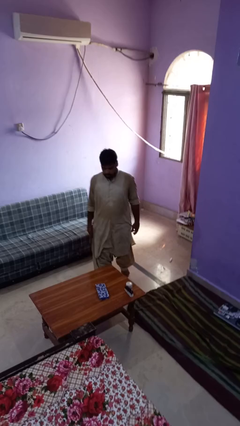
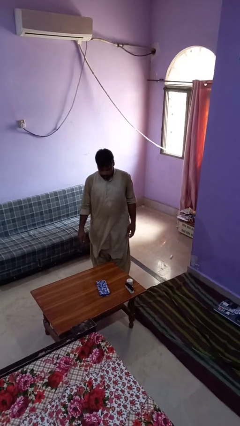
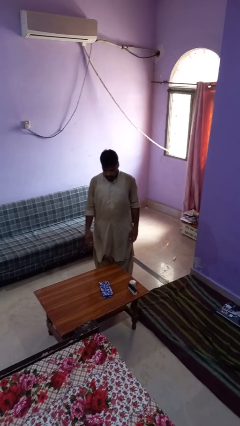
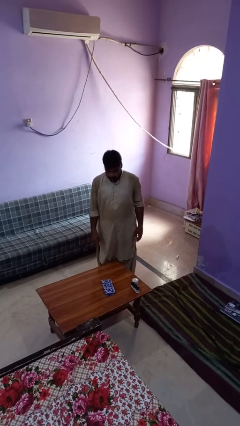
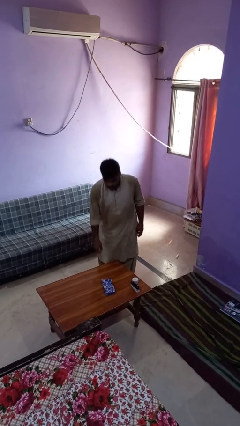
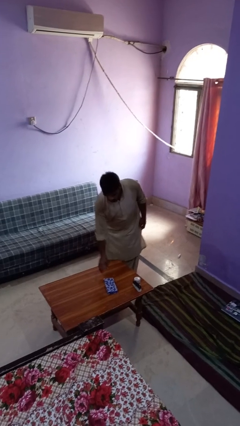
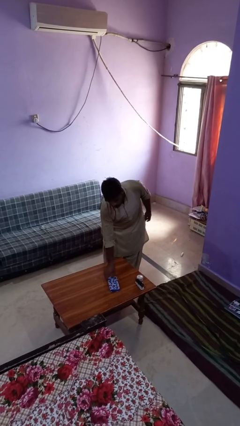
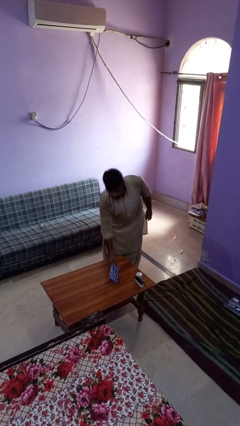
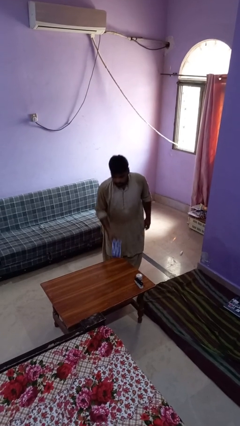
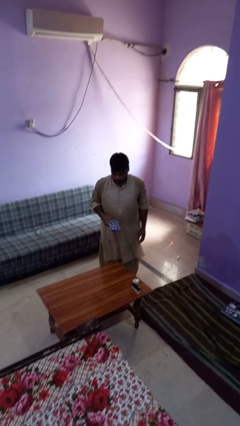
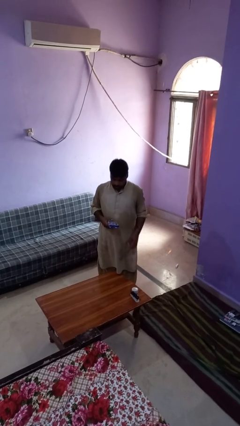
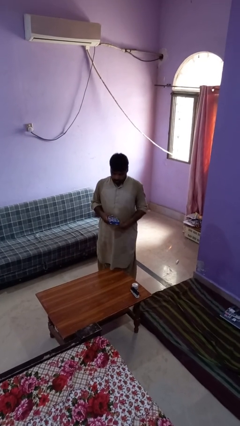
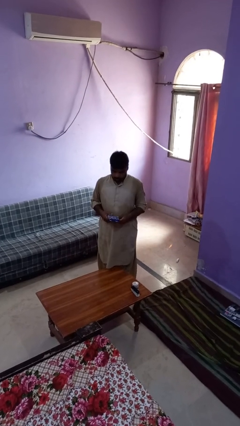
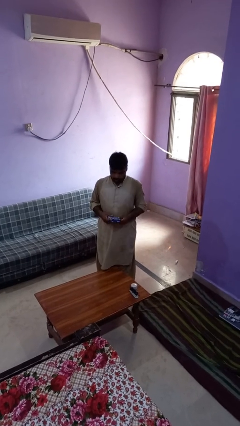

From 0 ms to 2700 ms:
person picks up object from table

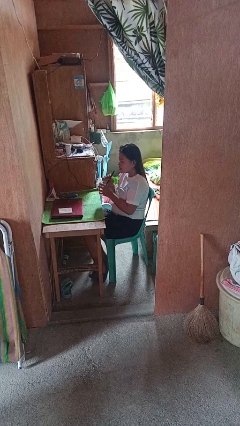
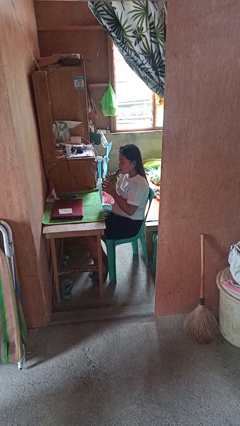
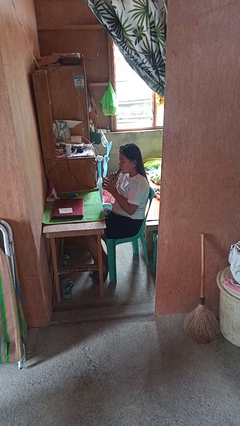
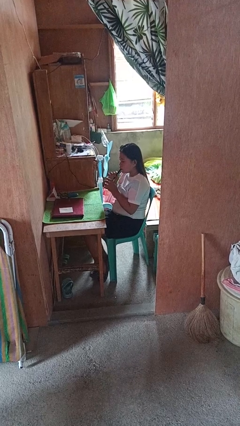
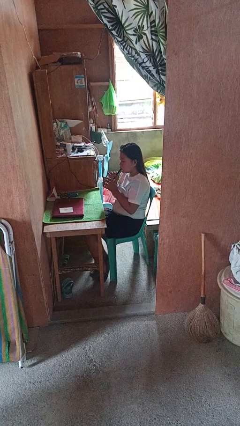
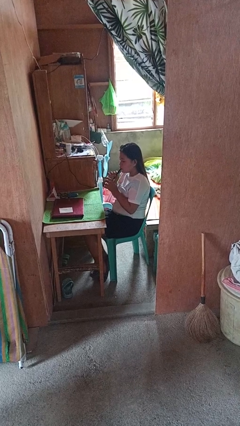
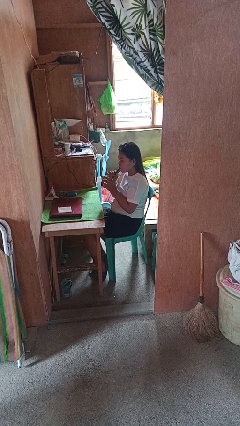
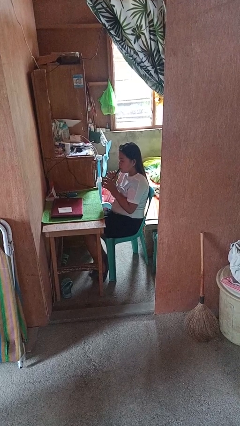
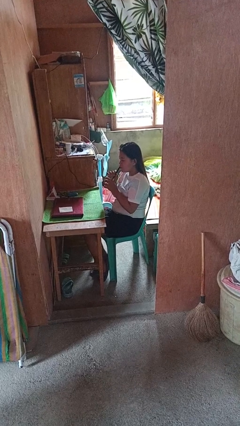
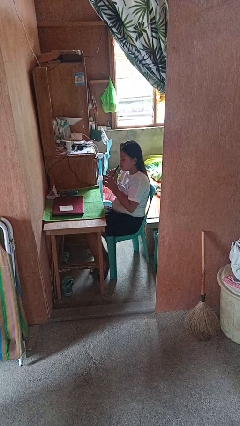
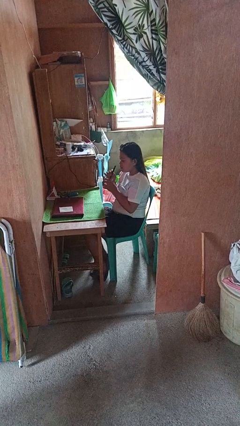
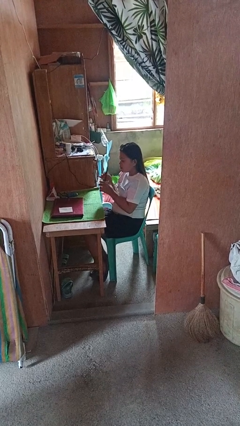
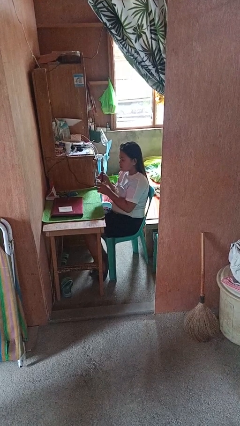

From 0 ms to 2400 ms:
person drinks from straw

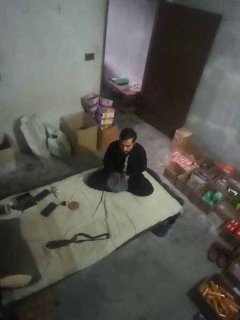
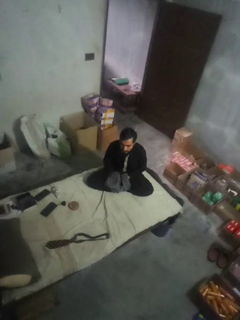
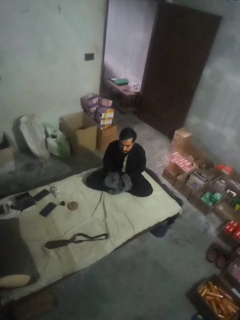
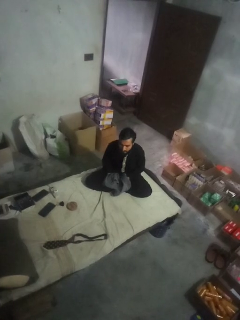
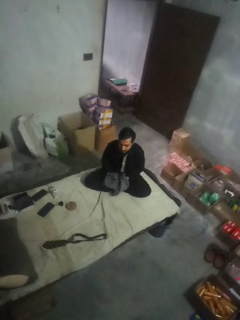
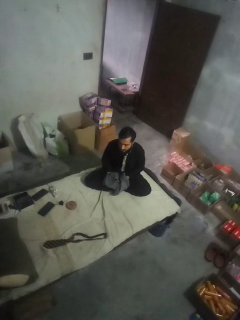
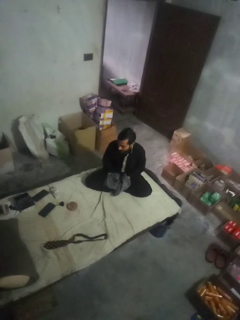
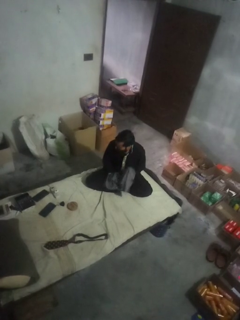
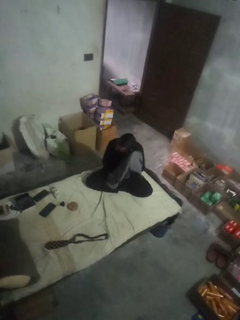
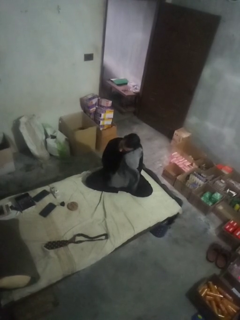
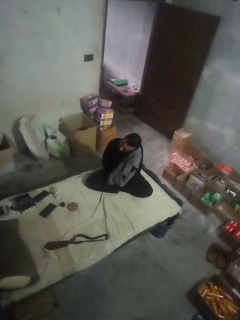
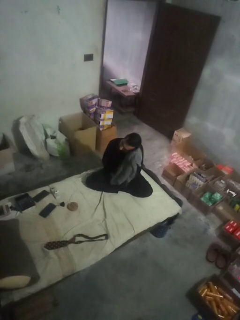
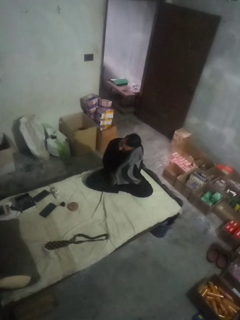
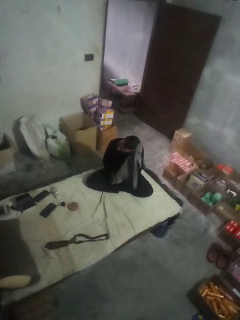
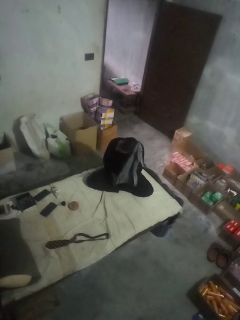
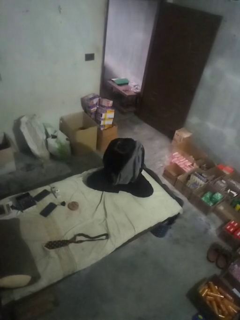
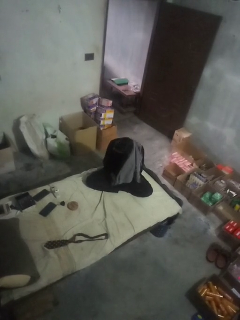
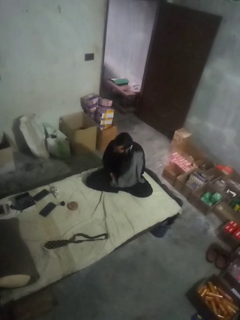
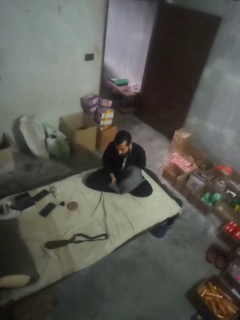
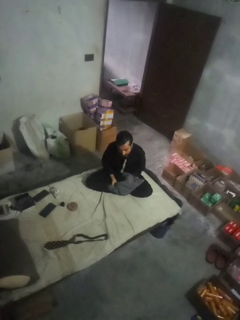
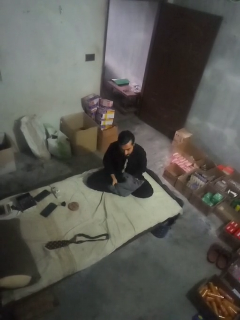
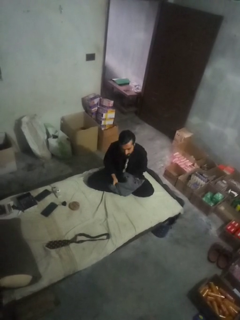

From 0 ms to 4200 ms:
person dries hair with towel

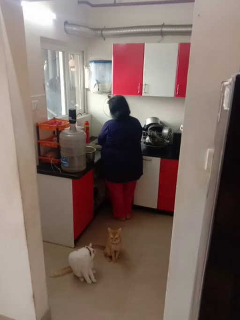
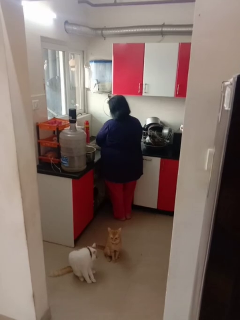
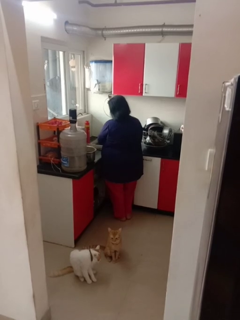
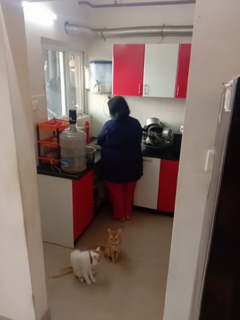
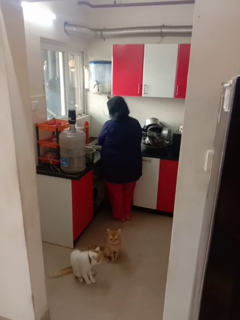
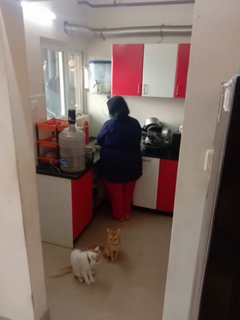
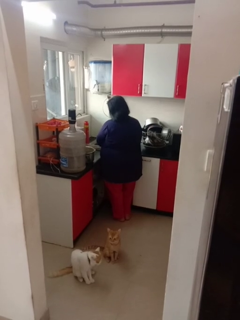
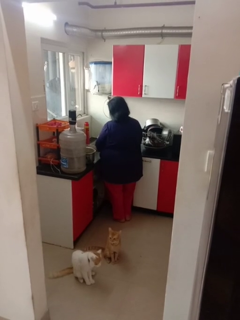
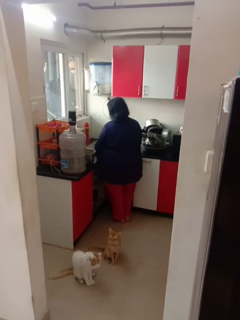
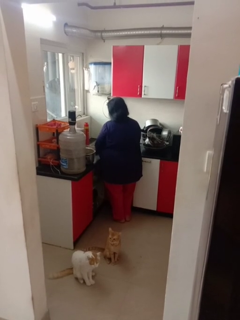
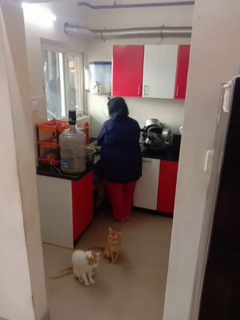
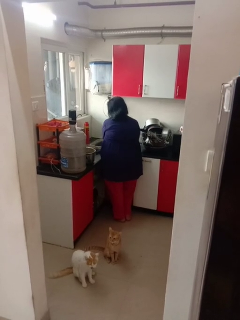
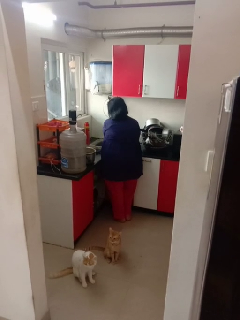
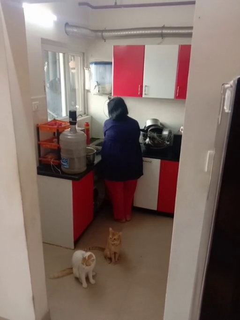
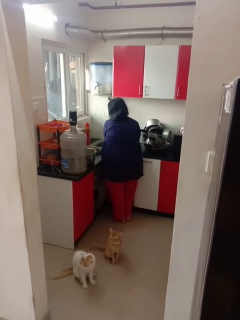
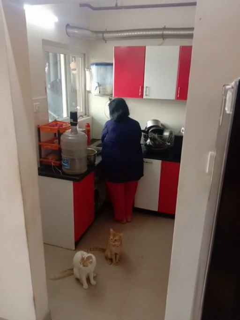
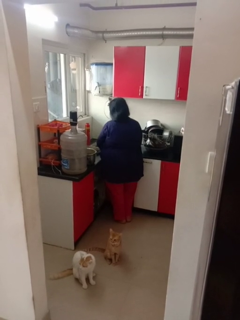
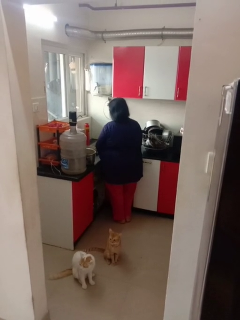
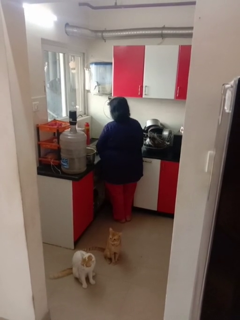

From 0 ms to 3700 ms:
person washes dish

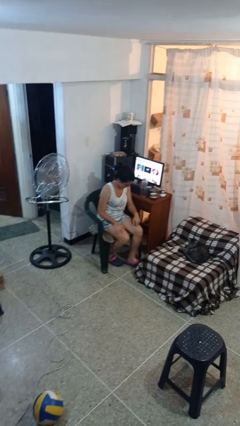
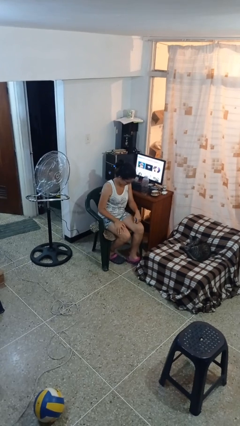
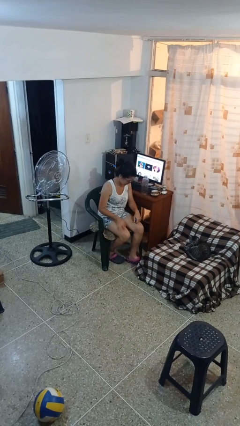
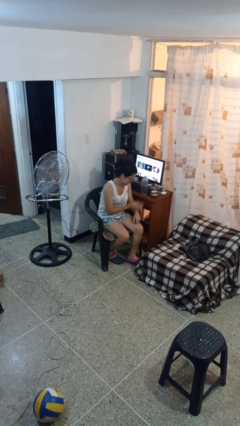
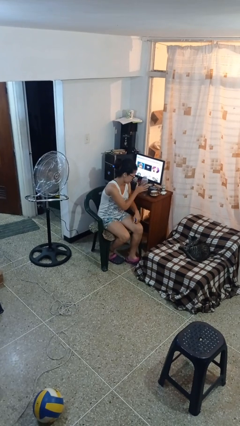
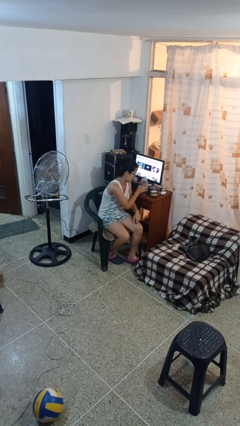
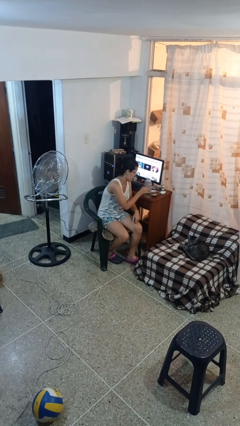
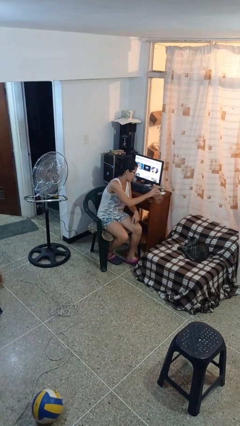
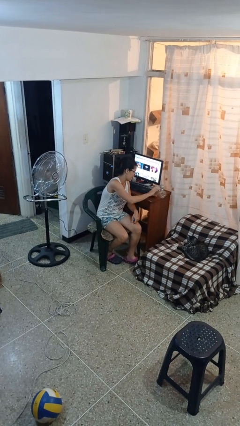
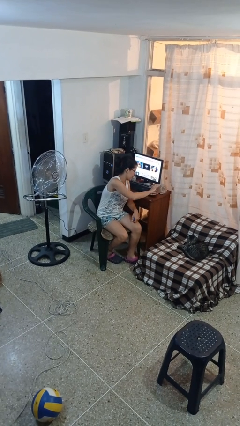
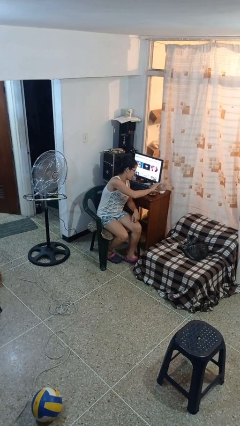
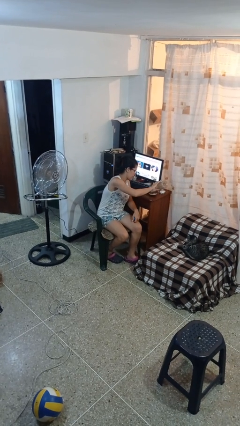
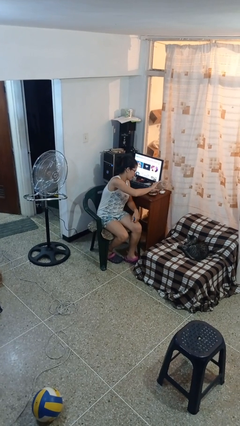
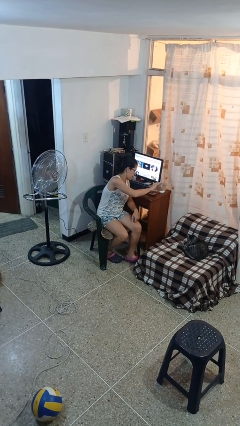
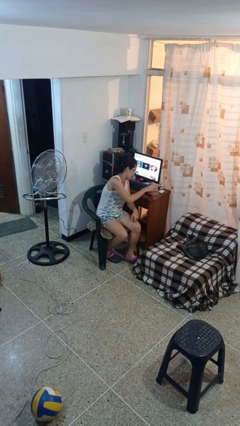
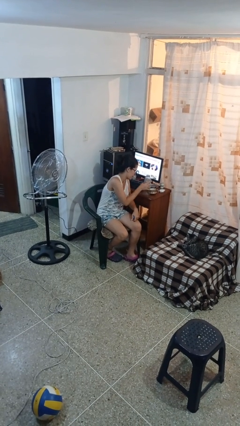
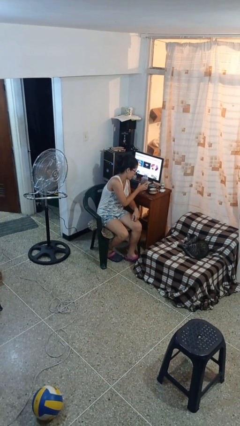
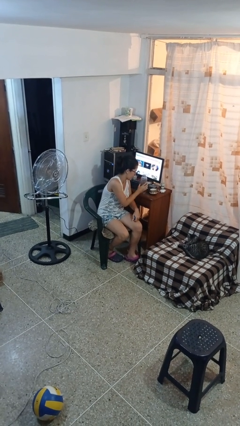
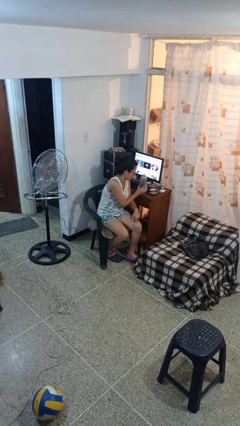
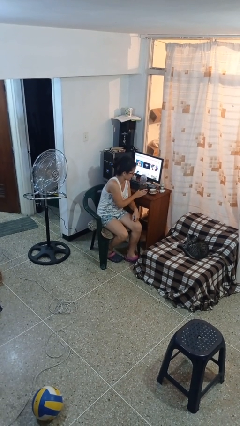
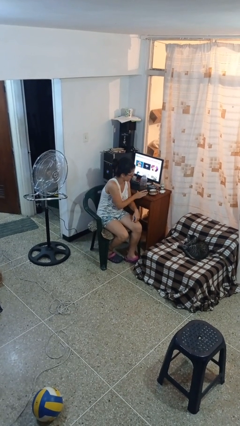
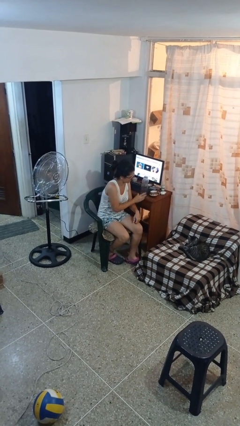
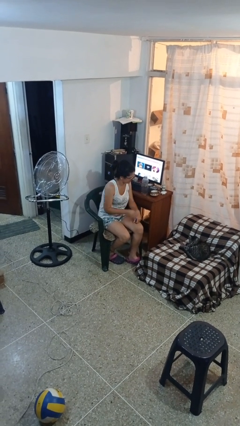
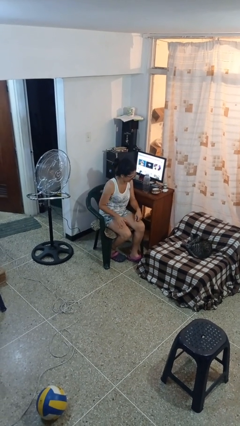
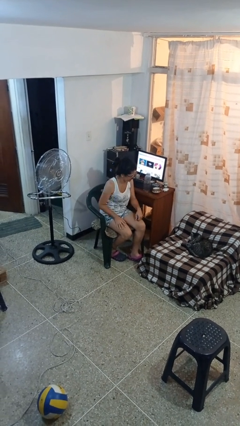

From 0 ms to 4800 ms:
person pours liquid into cup

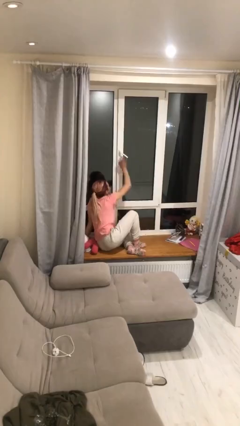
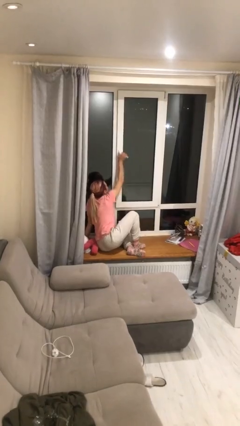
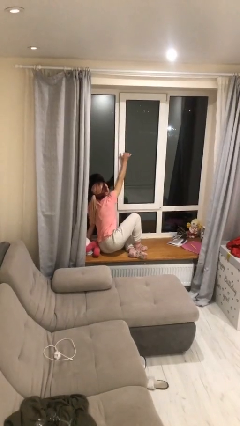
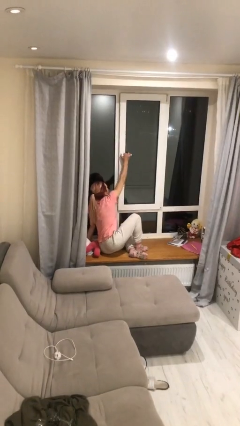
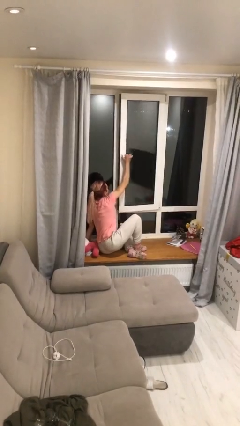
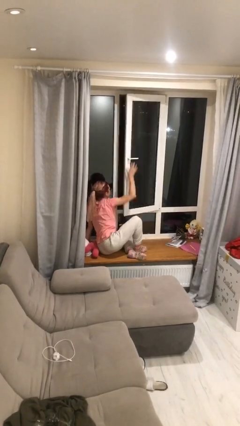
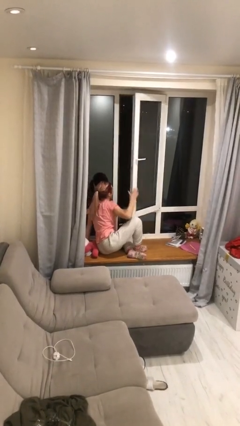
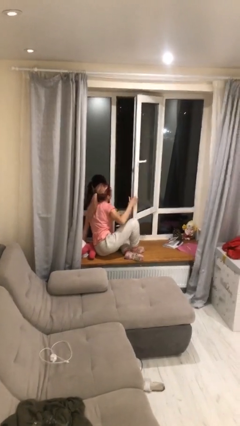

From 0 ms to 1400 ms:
person opens home window
